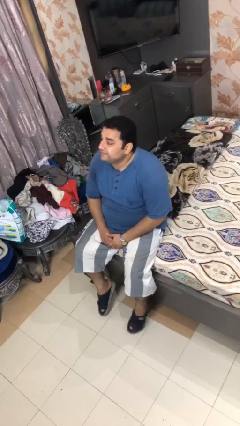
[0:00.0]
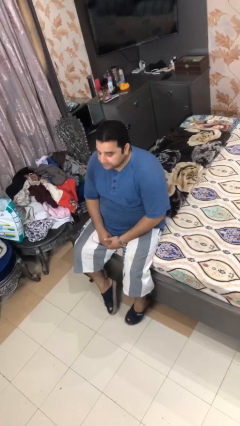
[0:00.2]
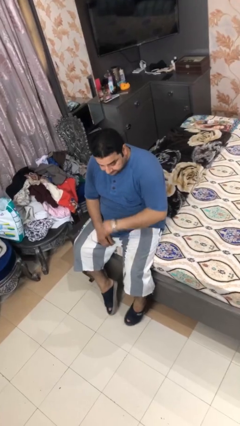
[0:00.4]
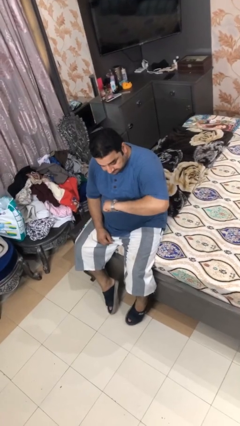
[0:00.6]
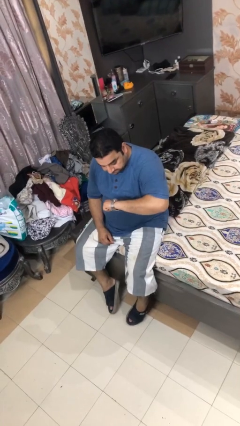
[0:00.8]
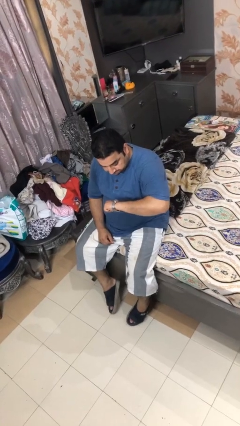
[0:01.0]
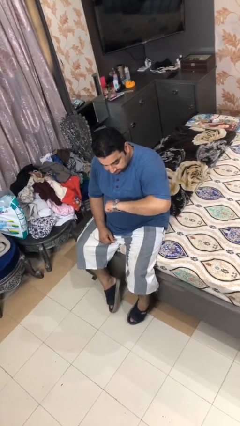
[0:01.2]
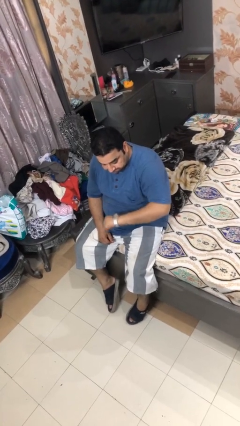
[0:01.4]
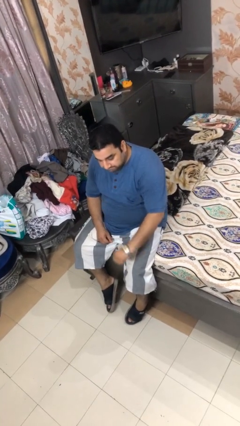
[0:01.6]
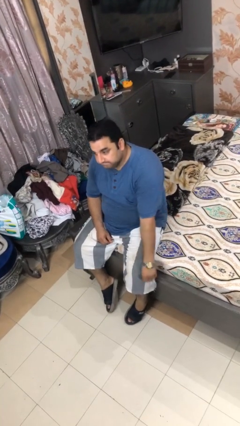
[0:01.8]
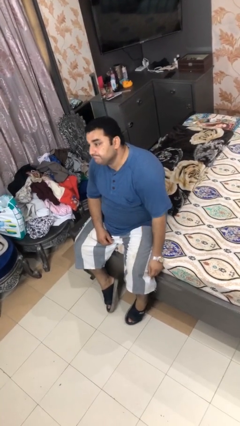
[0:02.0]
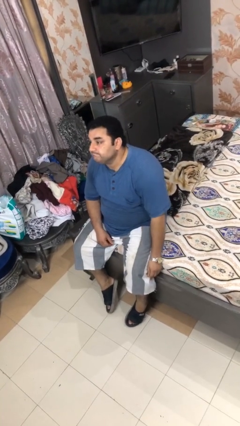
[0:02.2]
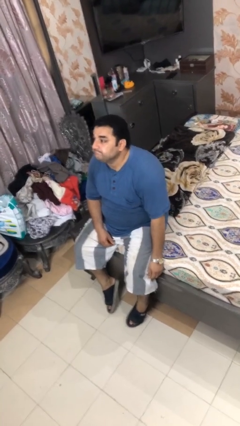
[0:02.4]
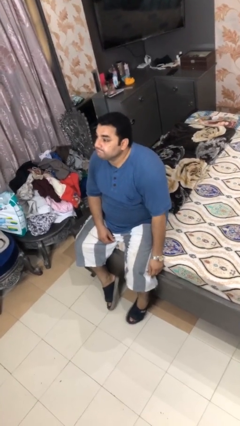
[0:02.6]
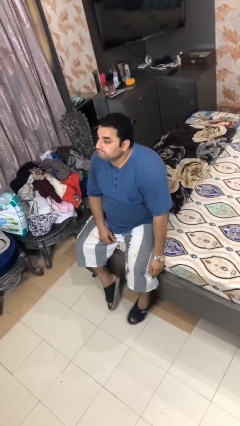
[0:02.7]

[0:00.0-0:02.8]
person looks at wristwatch

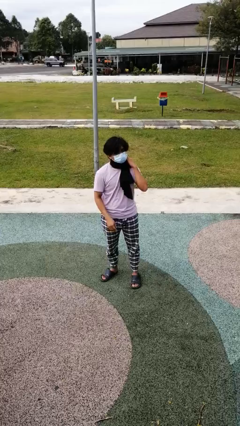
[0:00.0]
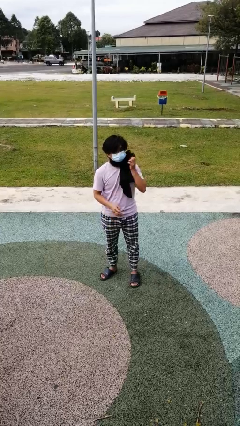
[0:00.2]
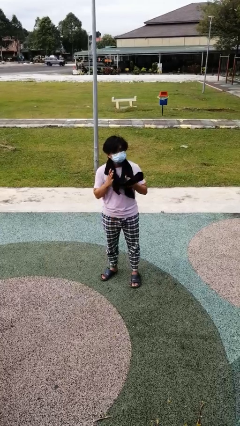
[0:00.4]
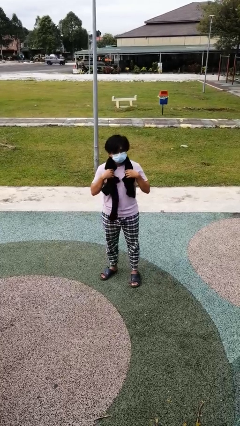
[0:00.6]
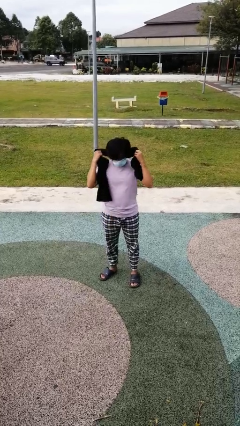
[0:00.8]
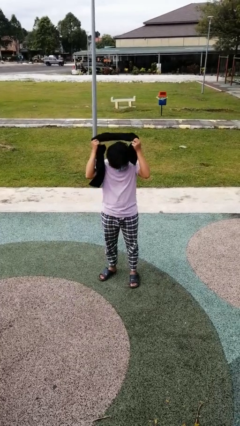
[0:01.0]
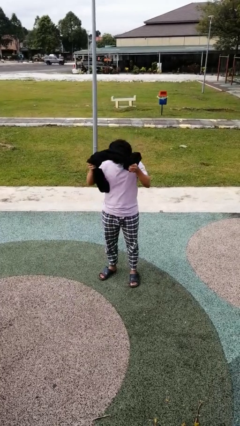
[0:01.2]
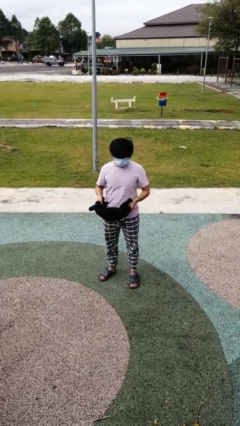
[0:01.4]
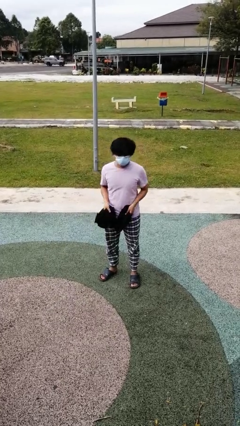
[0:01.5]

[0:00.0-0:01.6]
person takes off scarf

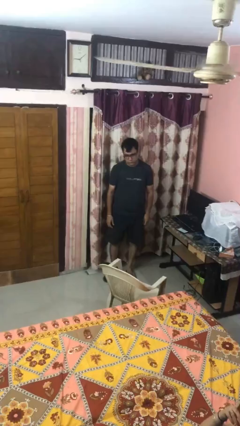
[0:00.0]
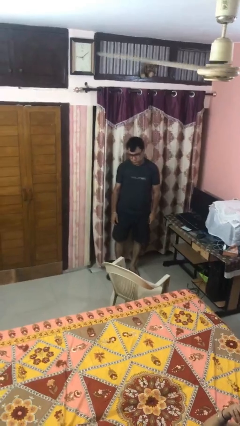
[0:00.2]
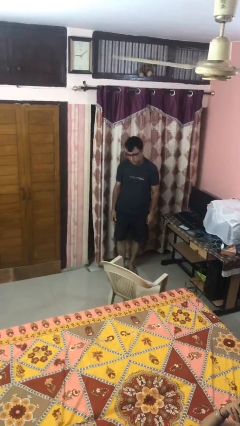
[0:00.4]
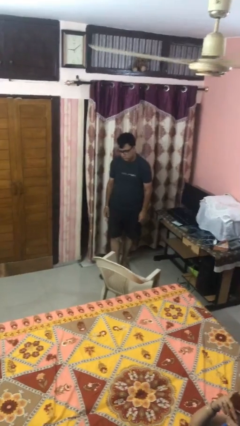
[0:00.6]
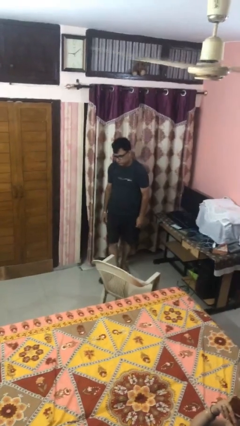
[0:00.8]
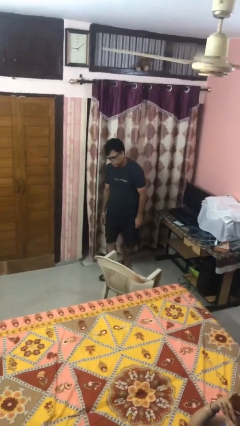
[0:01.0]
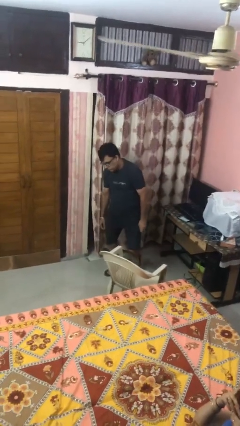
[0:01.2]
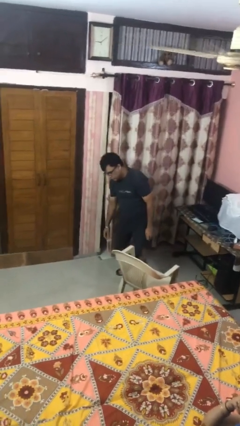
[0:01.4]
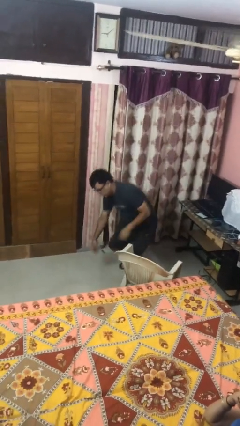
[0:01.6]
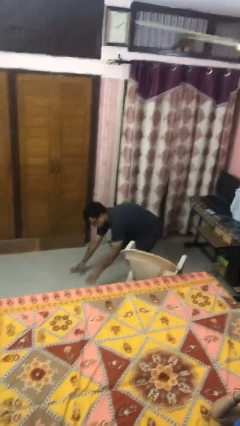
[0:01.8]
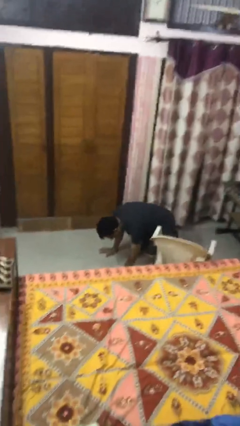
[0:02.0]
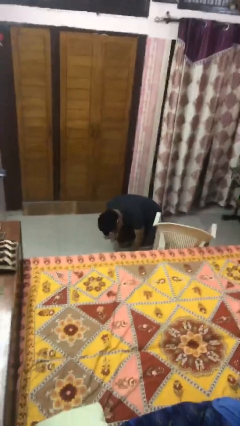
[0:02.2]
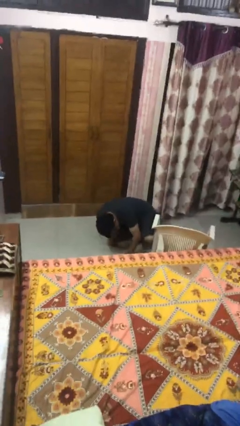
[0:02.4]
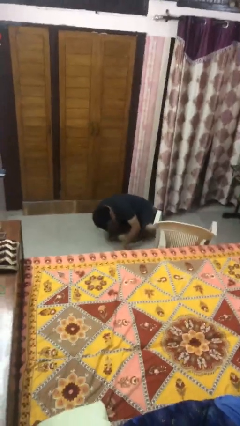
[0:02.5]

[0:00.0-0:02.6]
person trips on object on floor

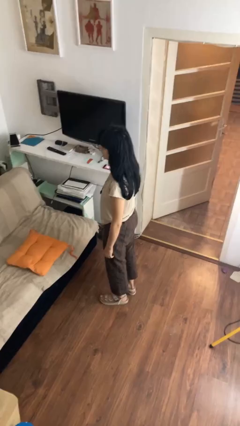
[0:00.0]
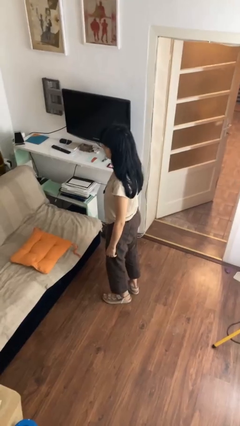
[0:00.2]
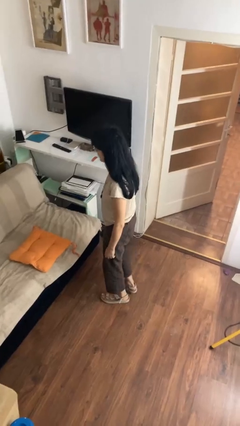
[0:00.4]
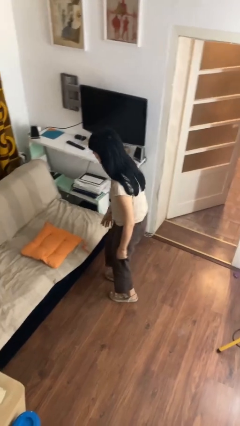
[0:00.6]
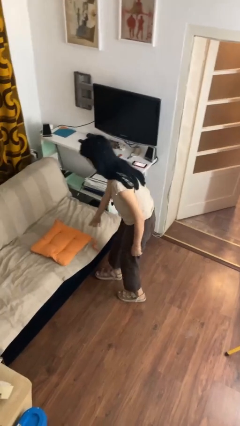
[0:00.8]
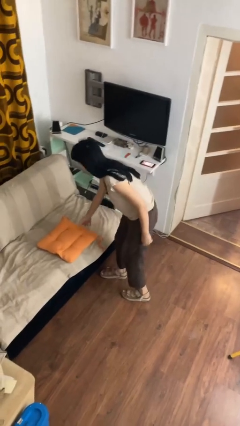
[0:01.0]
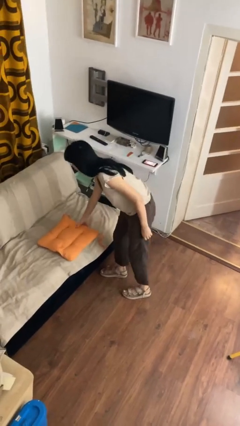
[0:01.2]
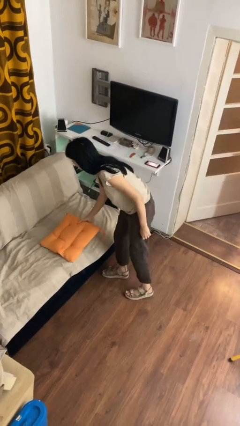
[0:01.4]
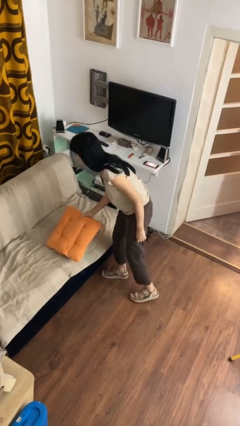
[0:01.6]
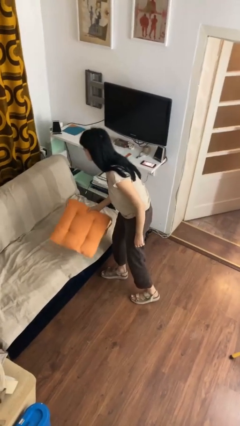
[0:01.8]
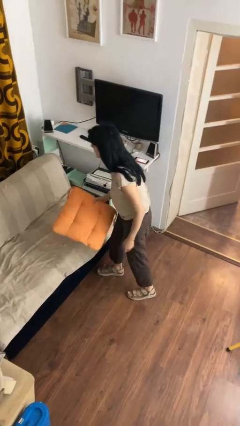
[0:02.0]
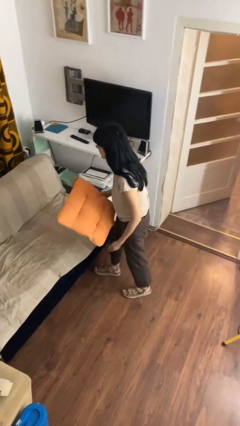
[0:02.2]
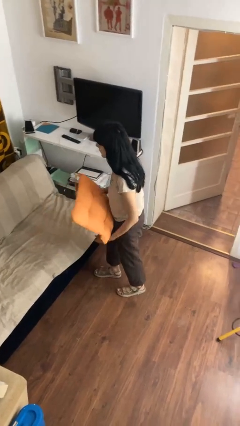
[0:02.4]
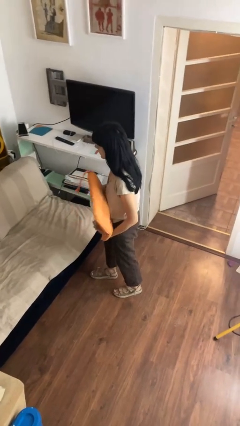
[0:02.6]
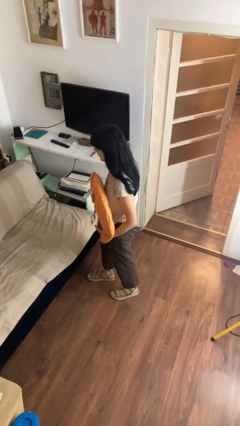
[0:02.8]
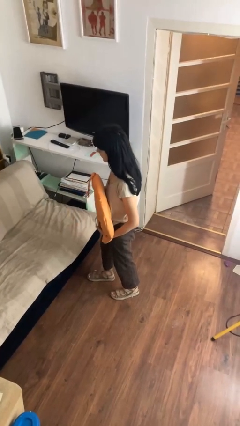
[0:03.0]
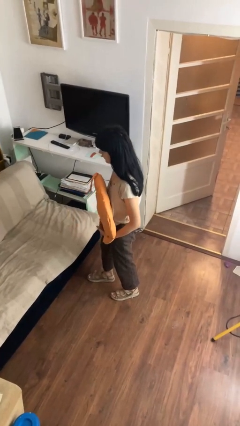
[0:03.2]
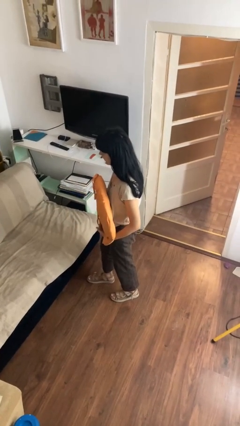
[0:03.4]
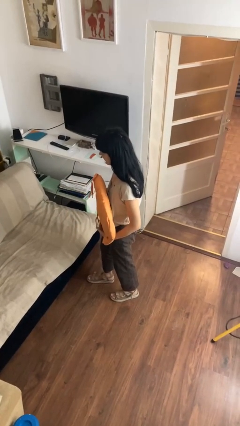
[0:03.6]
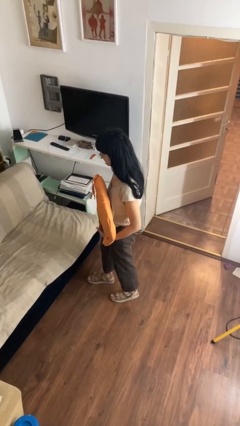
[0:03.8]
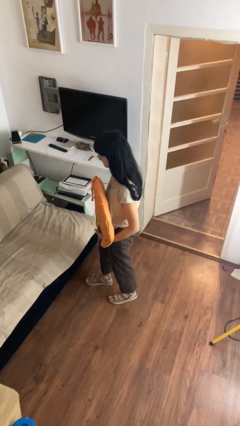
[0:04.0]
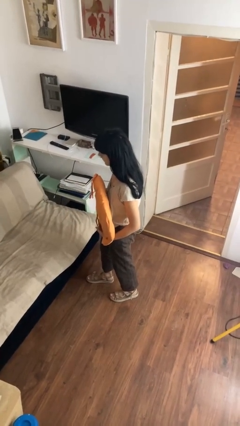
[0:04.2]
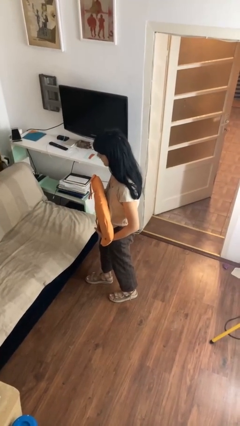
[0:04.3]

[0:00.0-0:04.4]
person picks up object from couch

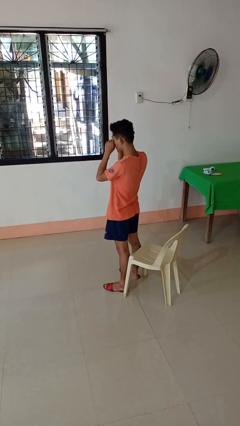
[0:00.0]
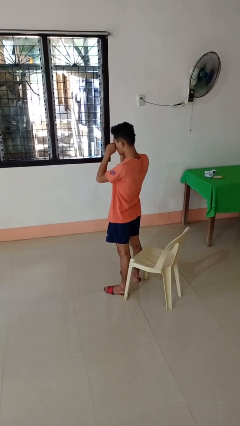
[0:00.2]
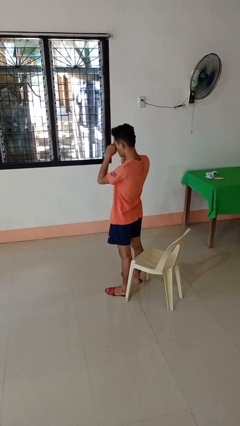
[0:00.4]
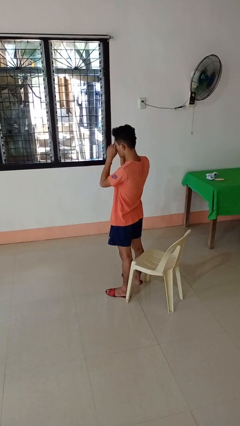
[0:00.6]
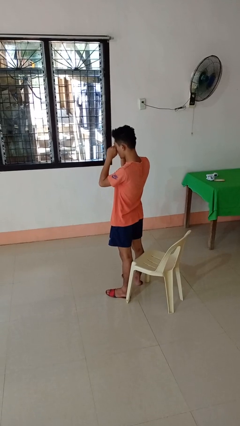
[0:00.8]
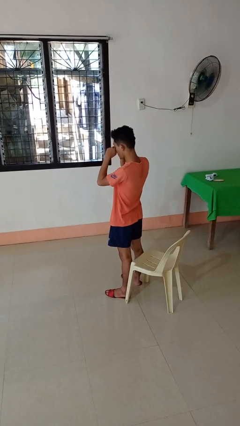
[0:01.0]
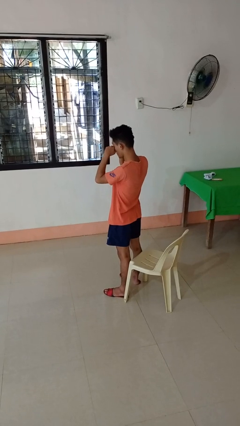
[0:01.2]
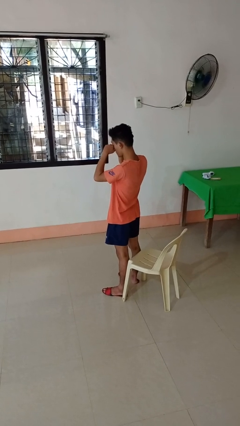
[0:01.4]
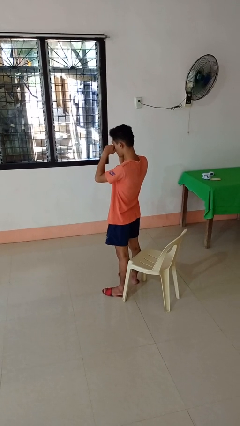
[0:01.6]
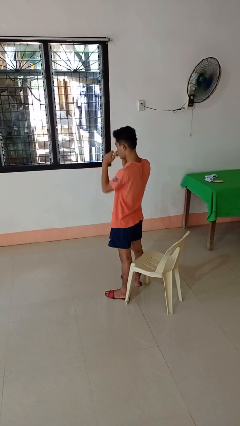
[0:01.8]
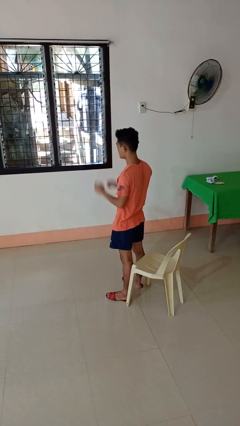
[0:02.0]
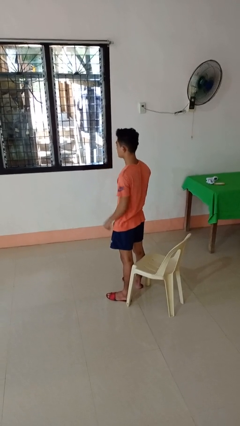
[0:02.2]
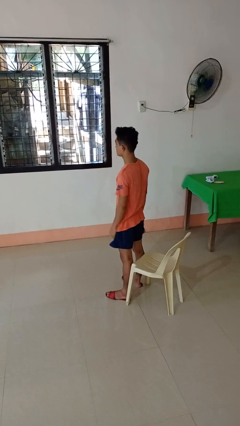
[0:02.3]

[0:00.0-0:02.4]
person rubs eyes

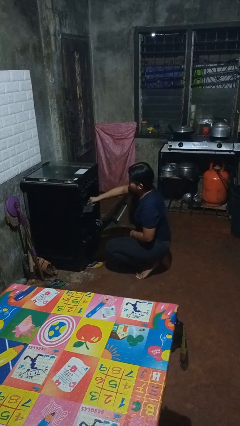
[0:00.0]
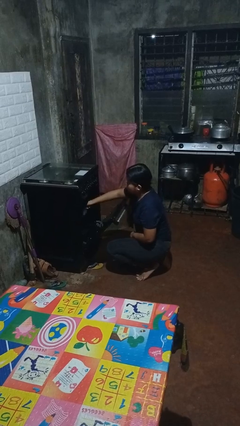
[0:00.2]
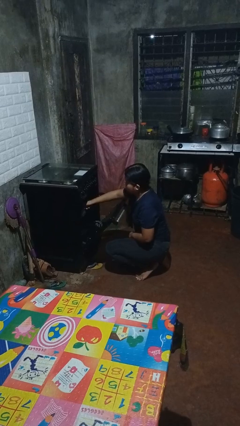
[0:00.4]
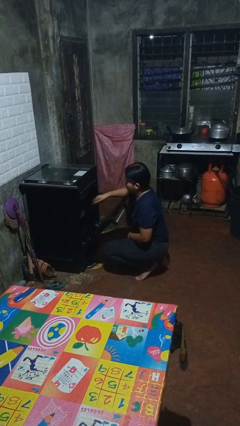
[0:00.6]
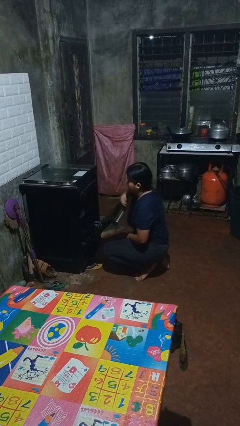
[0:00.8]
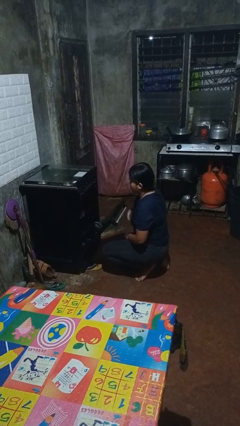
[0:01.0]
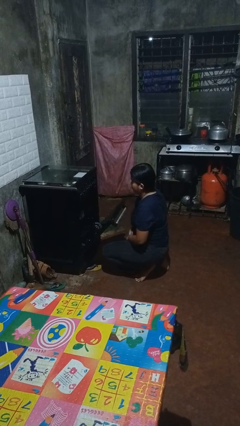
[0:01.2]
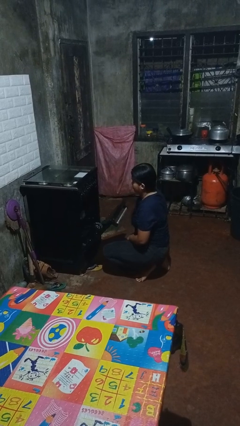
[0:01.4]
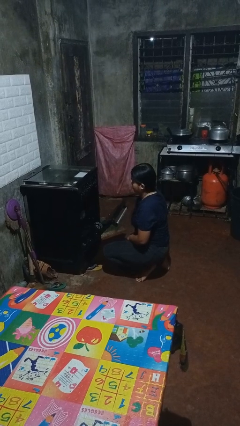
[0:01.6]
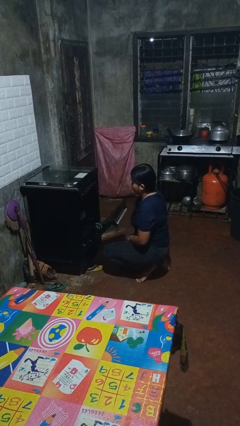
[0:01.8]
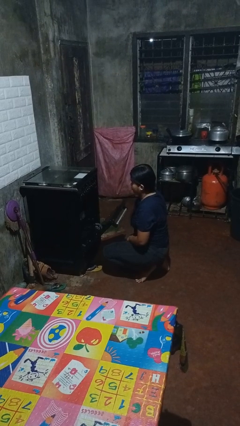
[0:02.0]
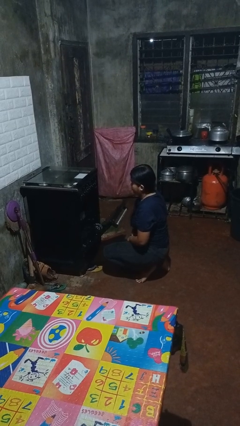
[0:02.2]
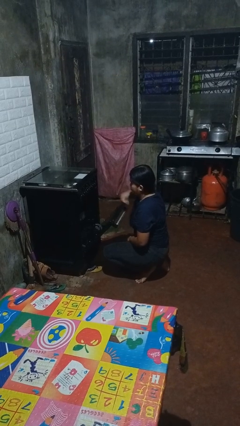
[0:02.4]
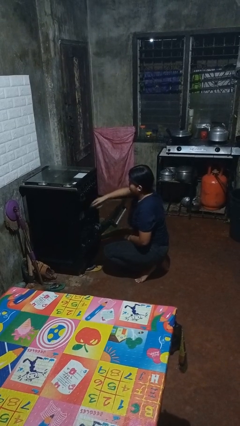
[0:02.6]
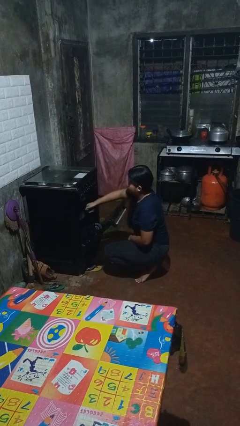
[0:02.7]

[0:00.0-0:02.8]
person puts object into oven

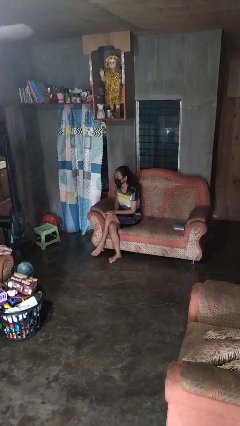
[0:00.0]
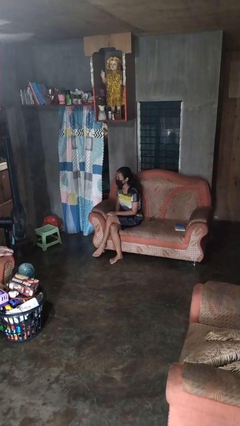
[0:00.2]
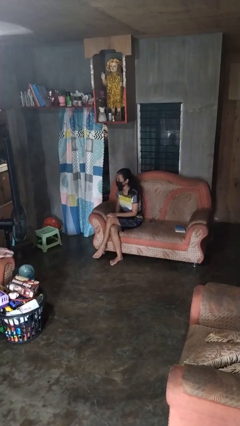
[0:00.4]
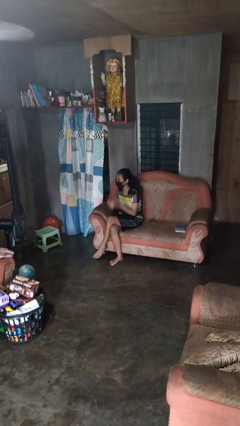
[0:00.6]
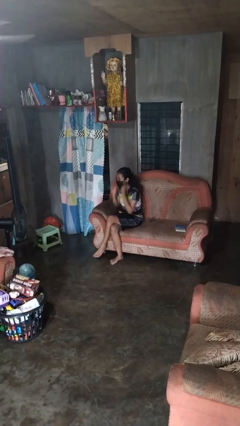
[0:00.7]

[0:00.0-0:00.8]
person takes off facemask
